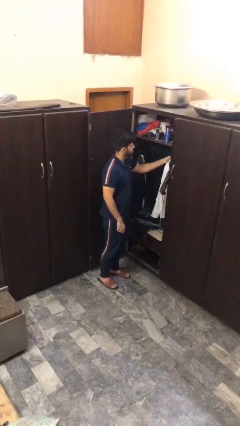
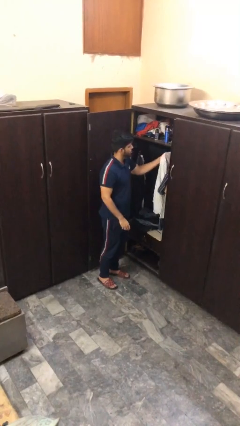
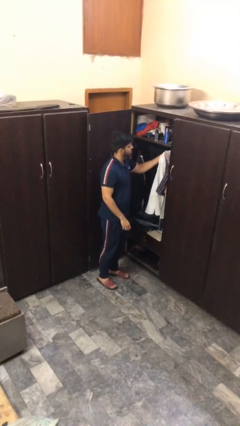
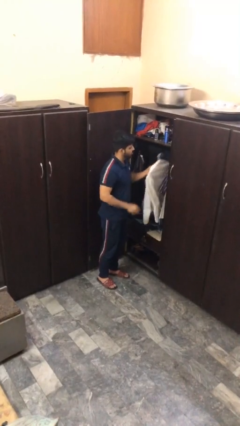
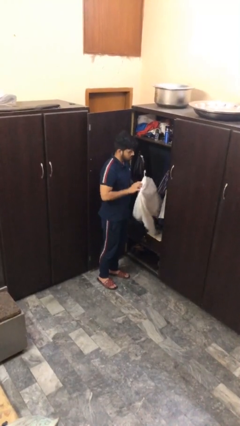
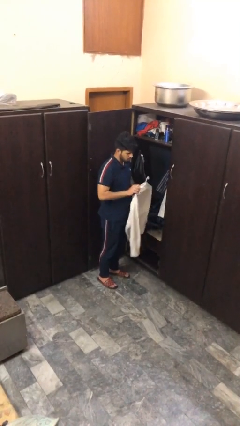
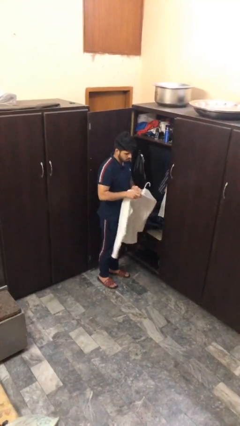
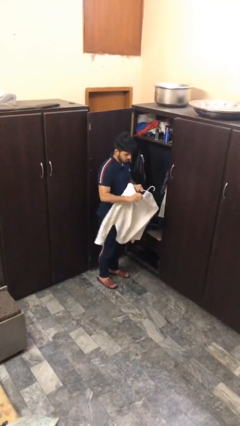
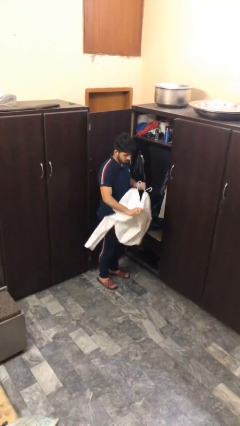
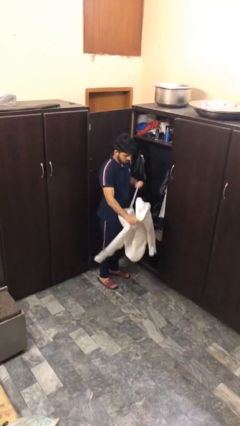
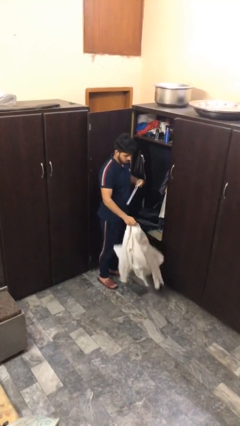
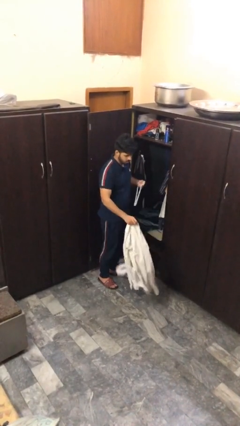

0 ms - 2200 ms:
person takes clothes from closet

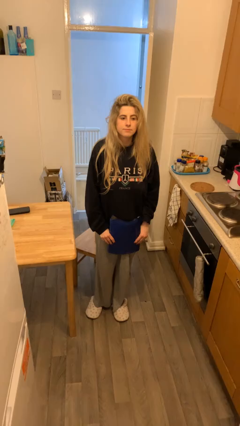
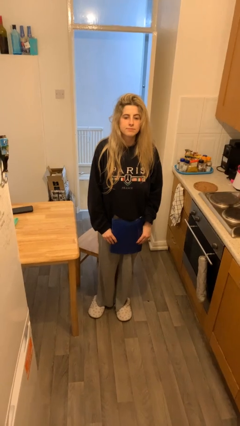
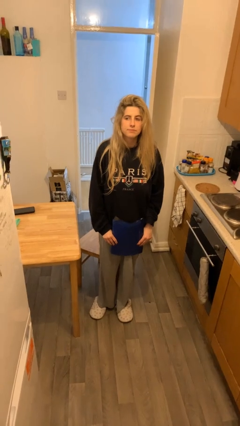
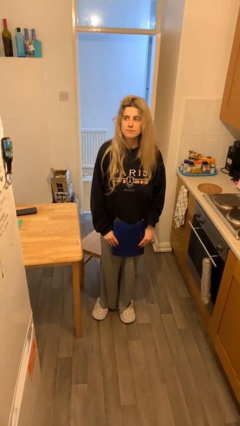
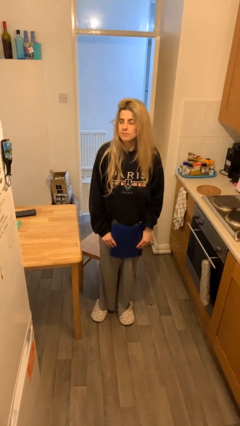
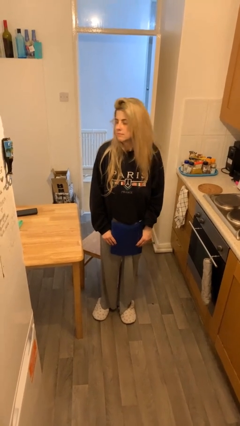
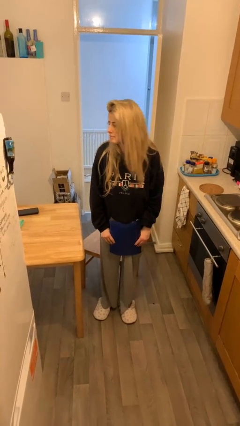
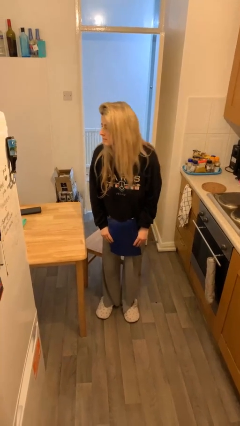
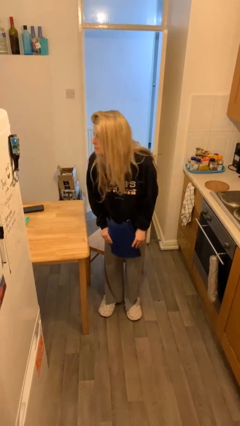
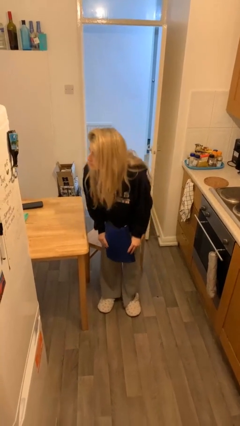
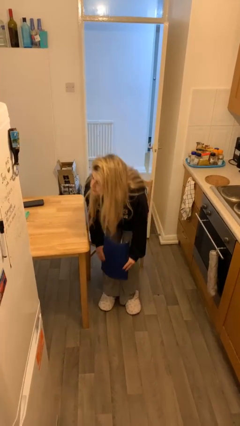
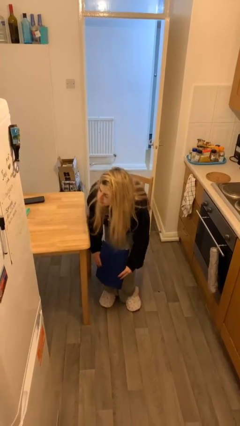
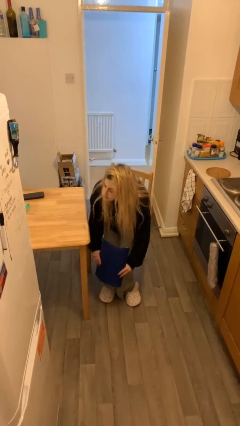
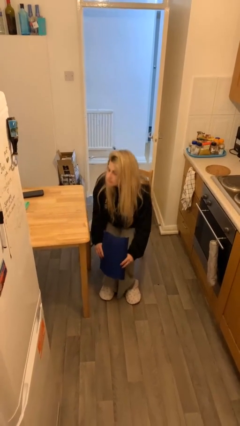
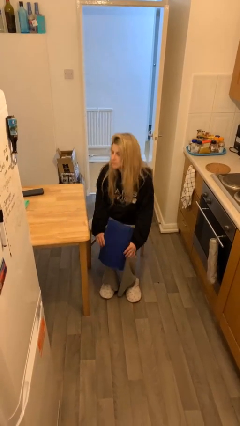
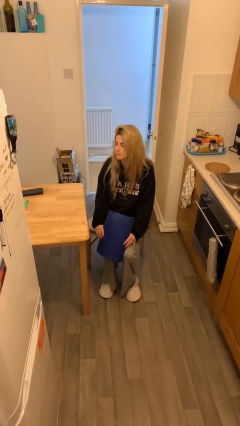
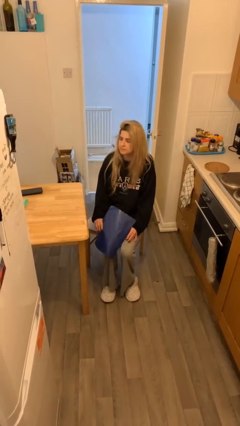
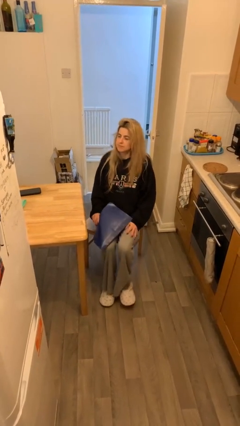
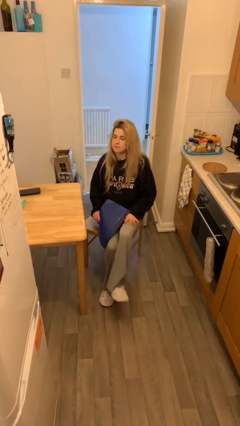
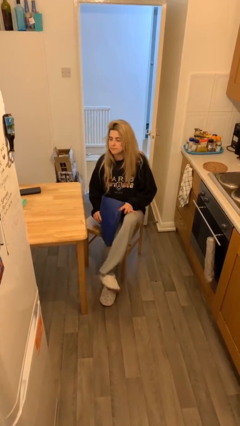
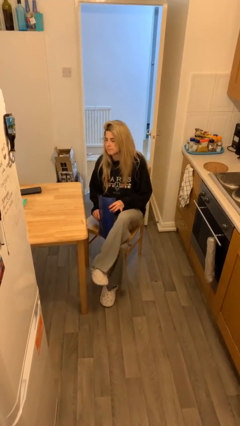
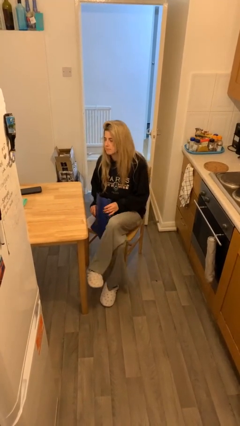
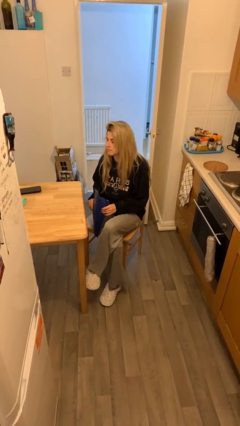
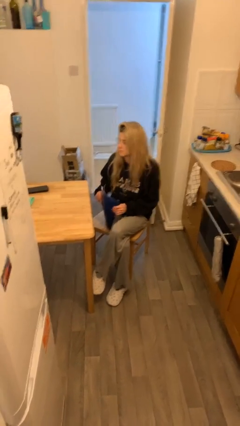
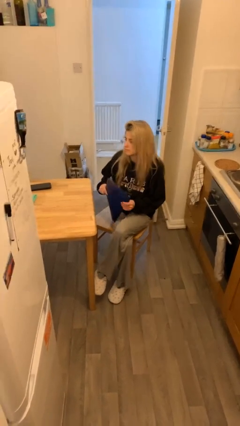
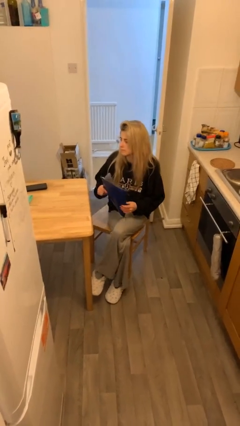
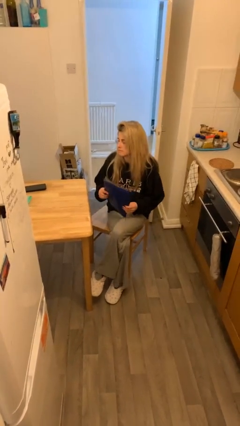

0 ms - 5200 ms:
person sits down

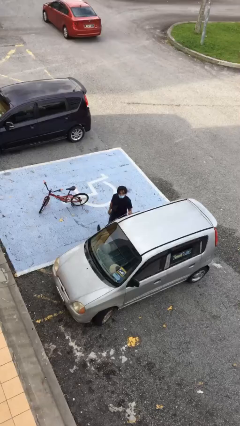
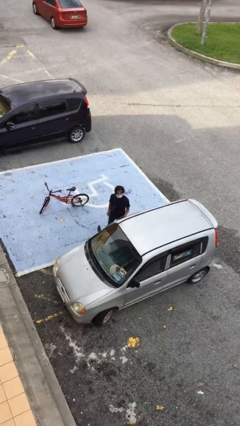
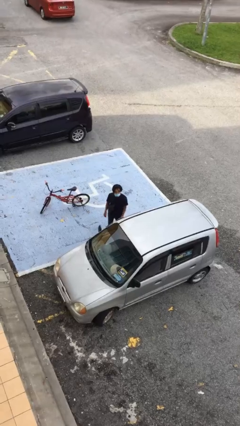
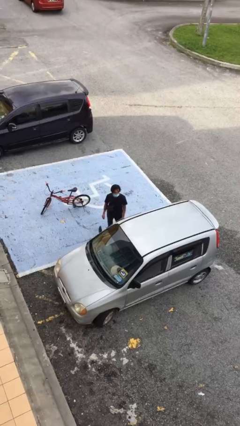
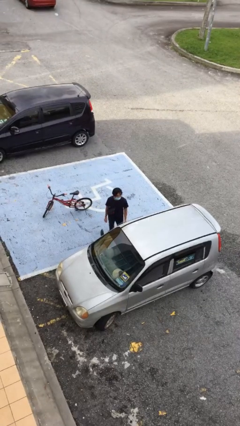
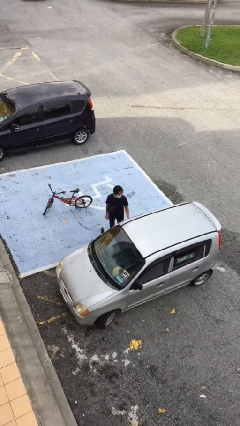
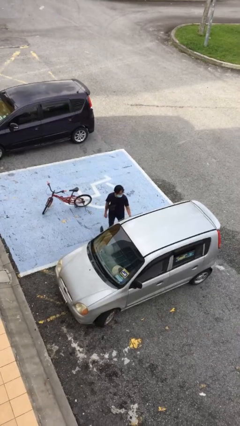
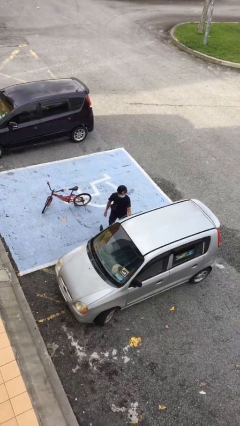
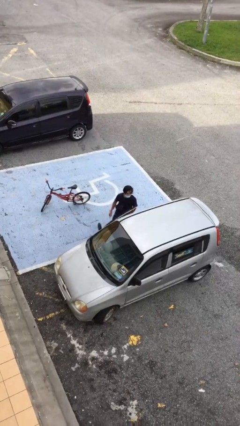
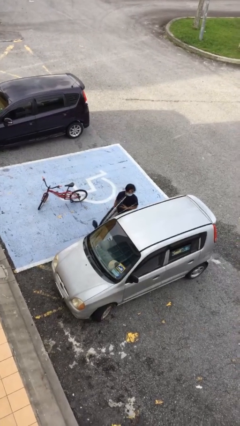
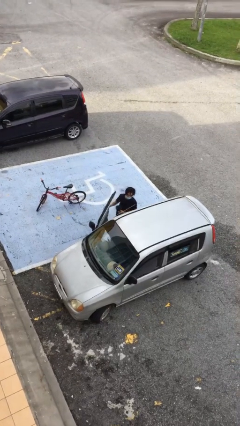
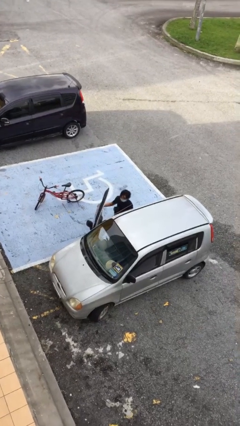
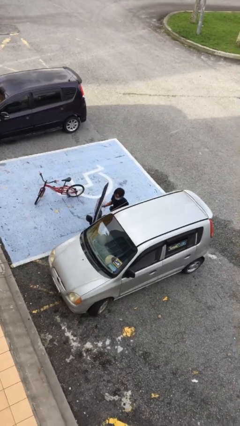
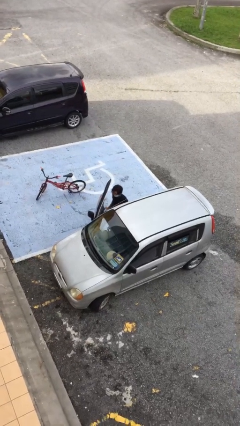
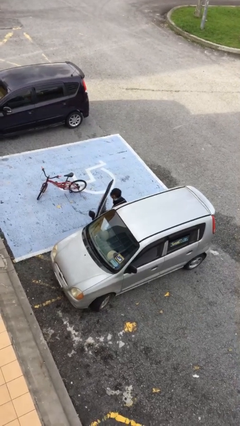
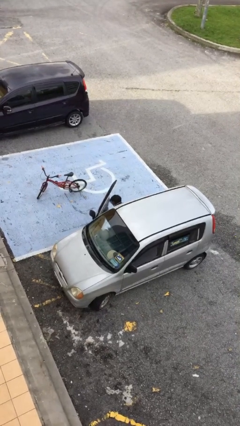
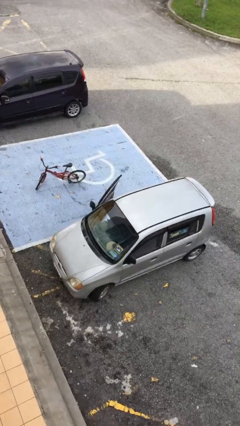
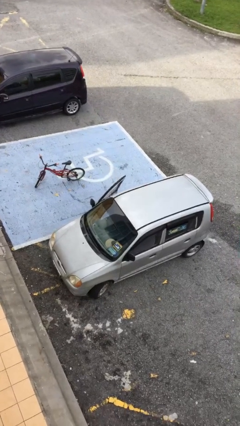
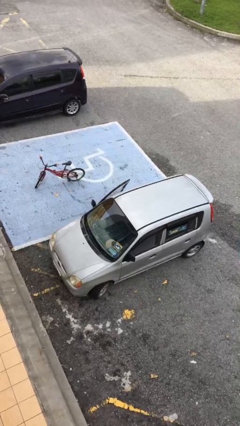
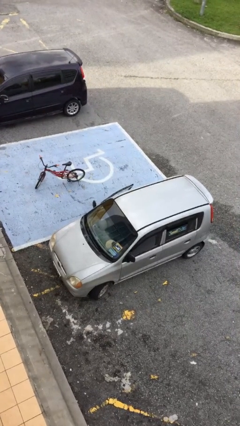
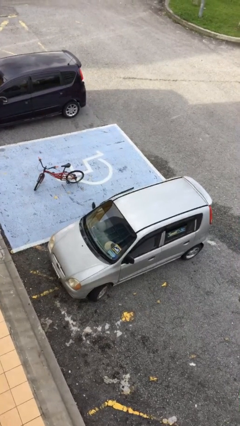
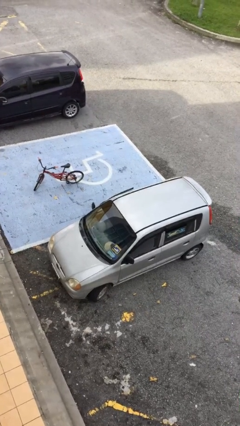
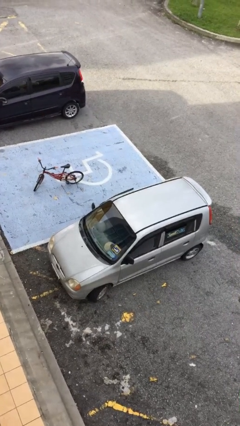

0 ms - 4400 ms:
person enters car

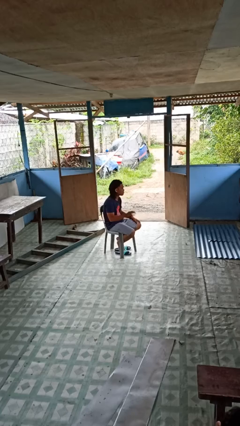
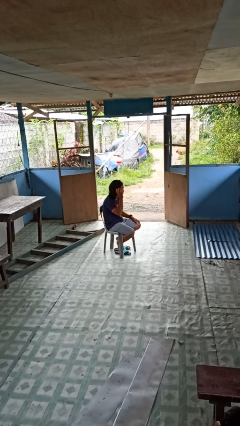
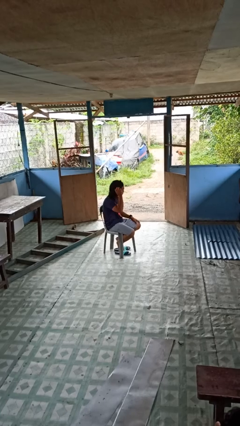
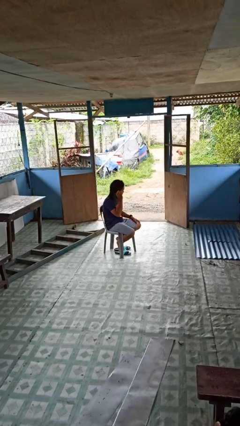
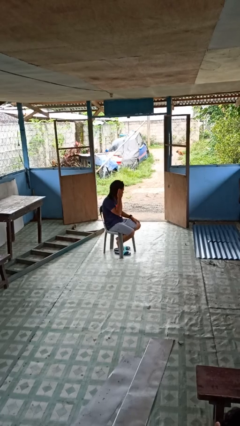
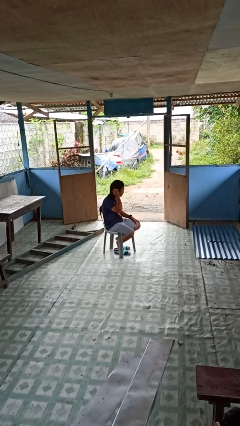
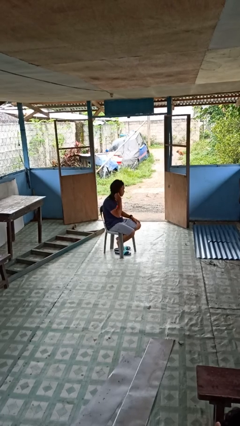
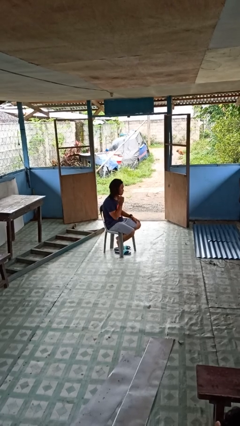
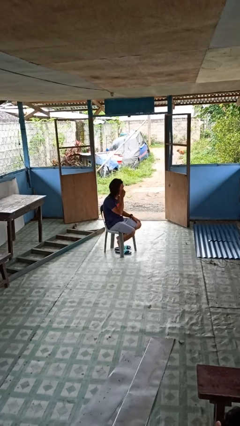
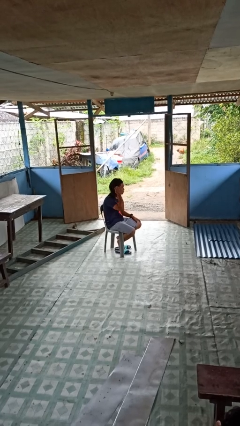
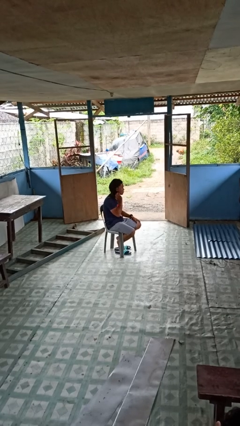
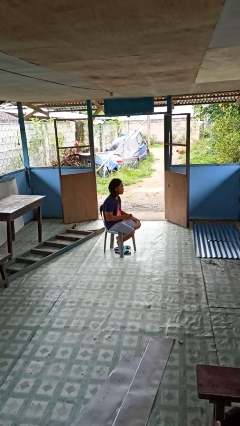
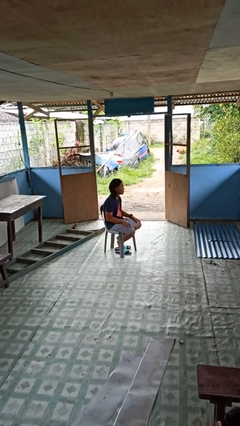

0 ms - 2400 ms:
person strokes hair

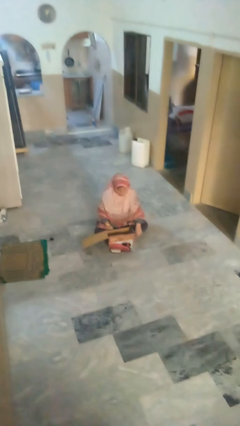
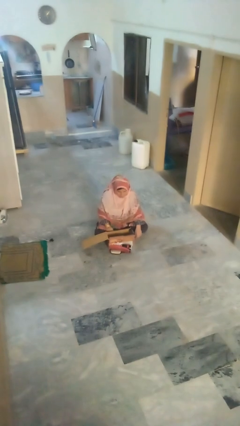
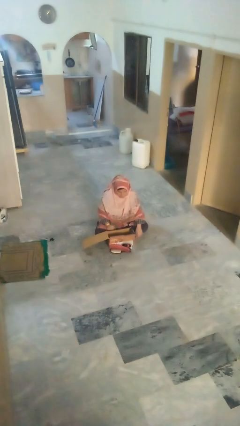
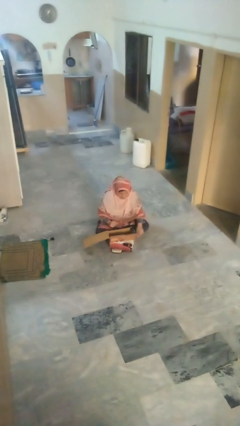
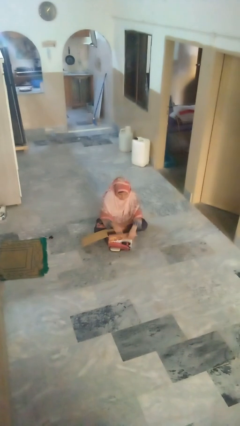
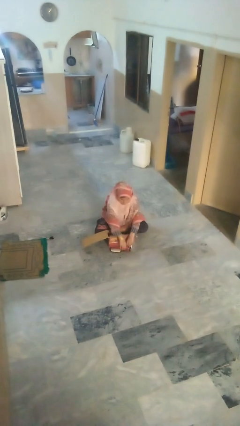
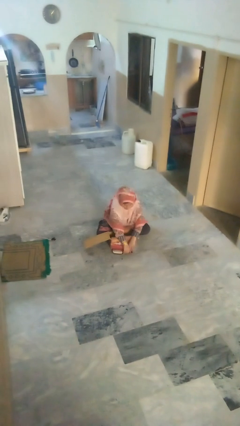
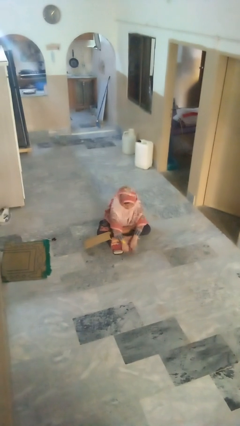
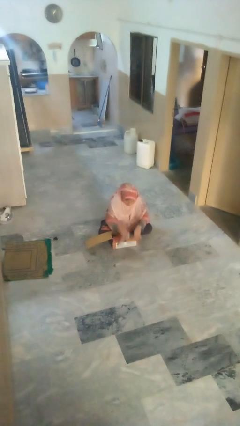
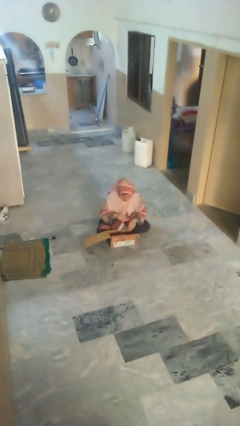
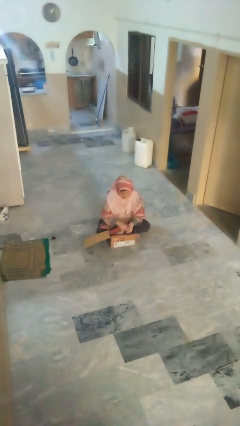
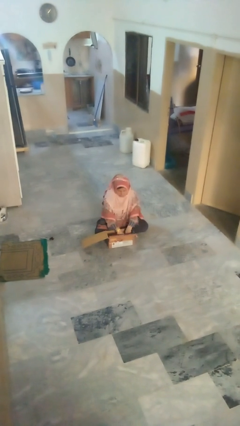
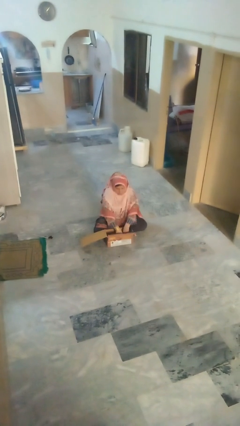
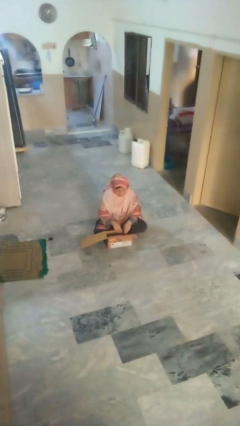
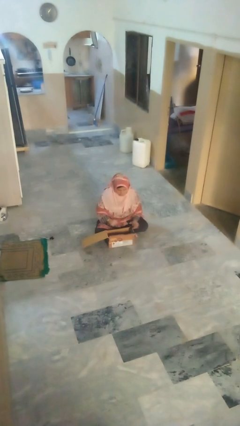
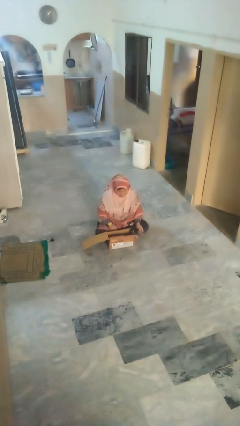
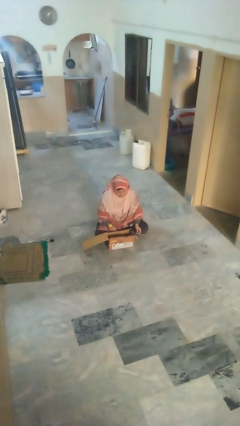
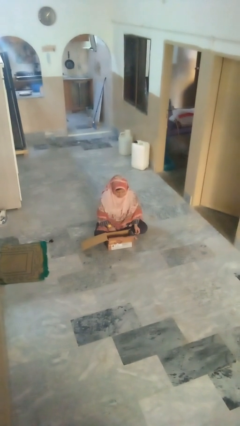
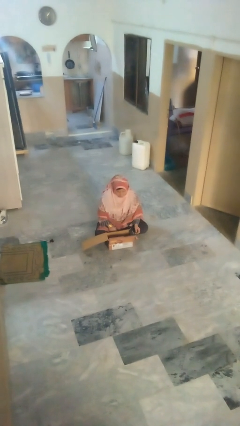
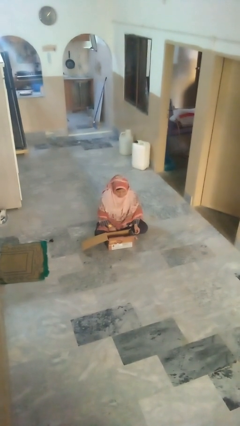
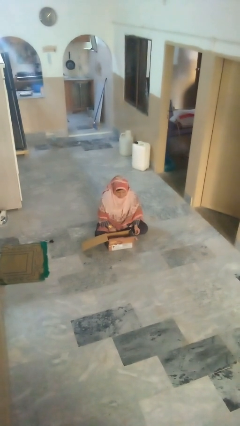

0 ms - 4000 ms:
person puts object into box
